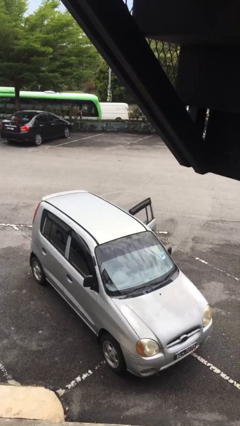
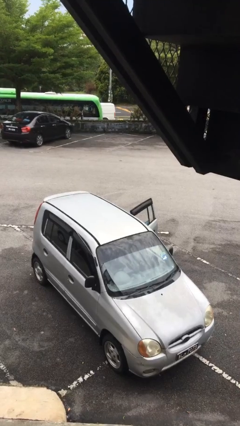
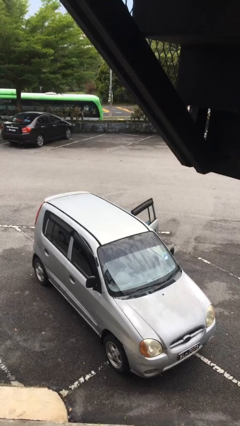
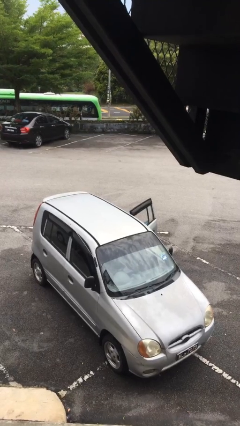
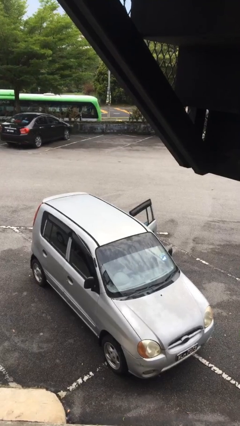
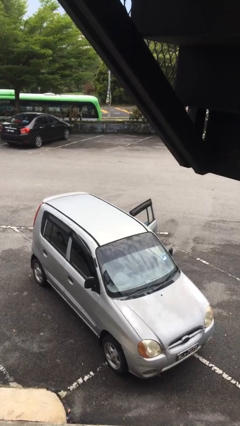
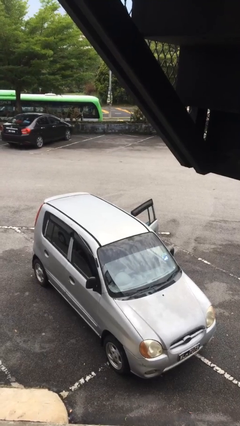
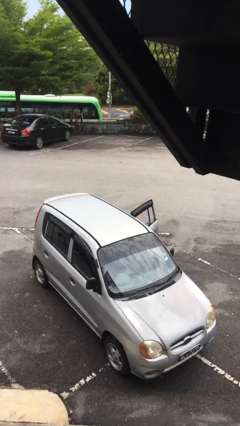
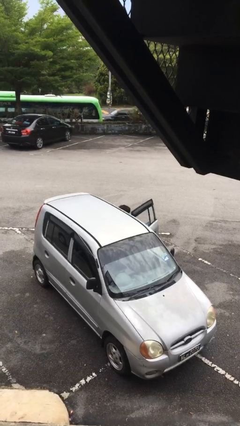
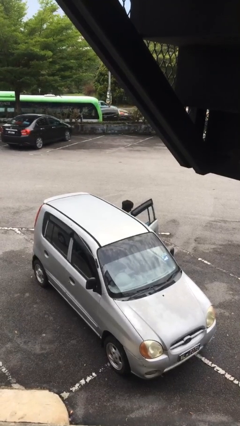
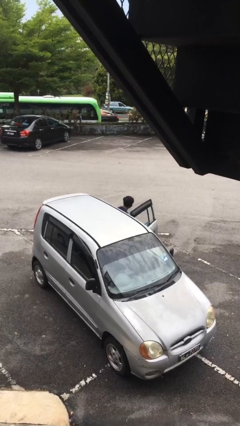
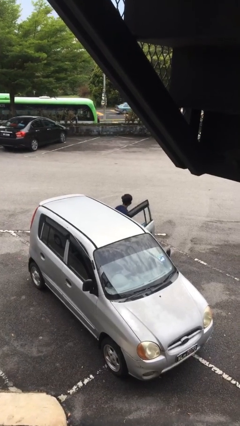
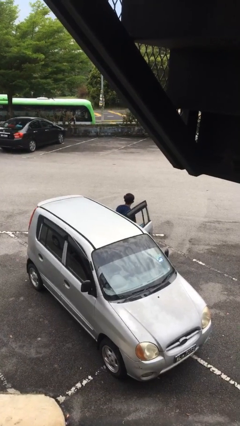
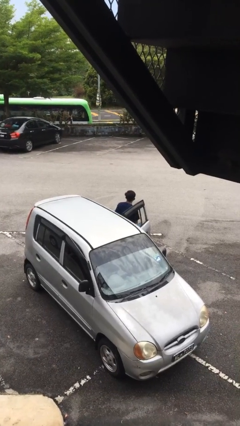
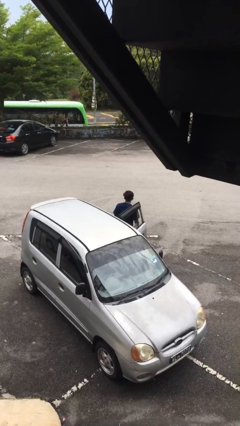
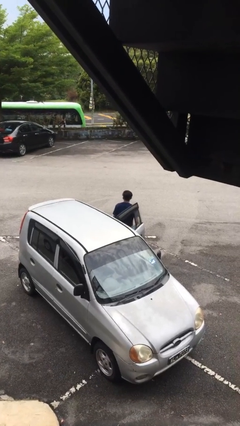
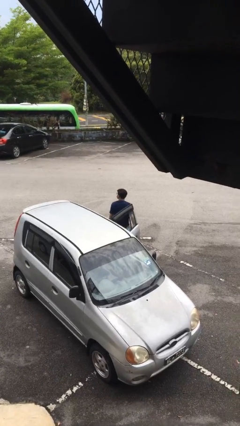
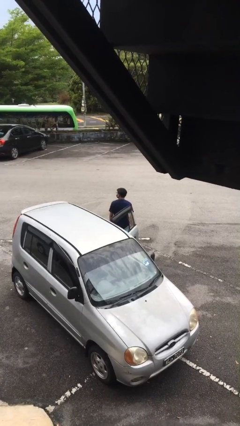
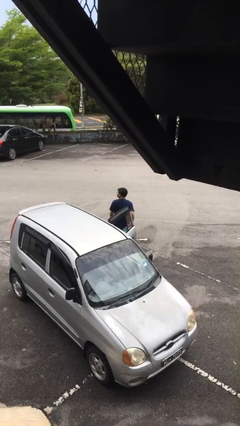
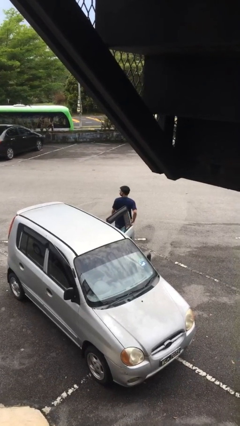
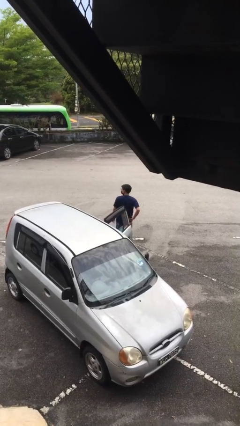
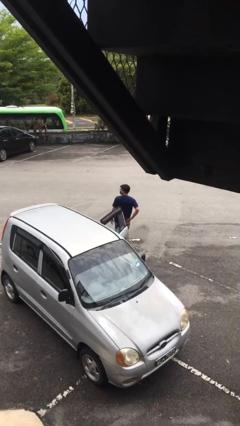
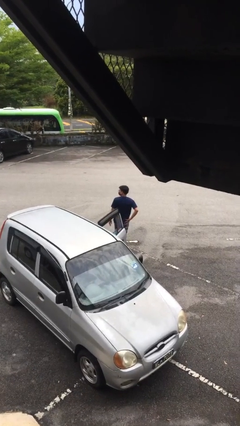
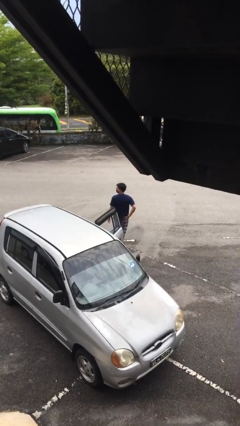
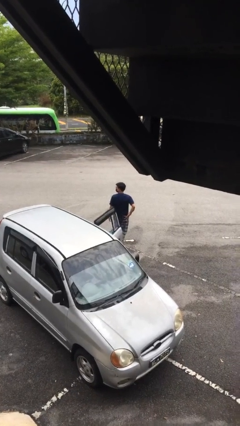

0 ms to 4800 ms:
person exits car

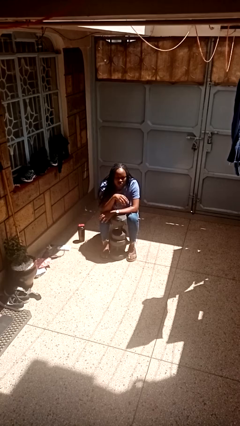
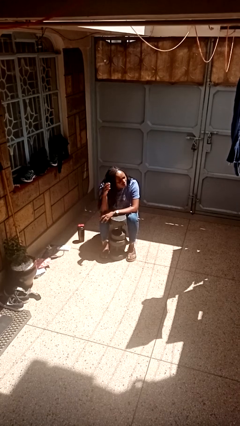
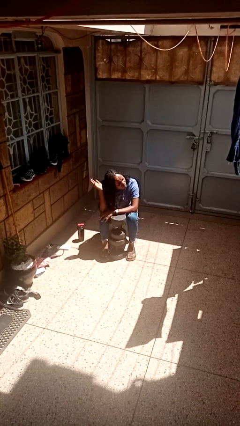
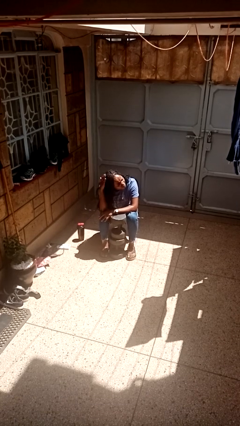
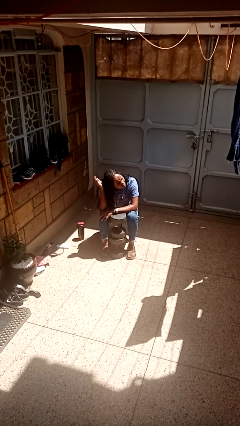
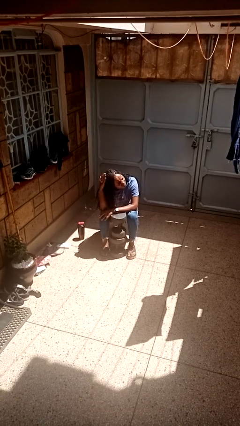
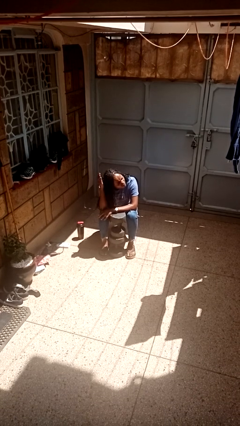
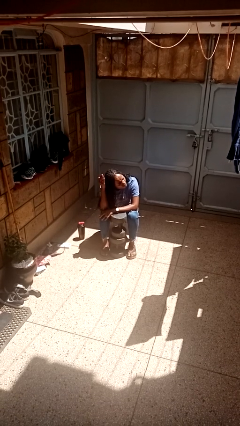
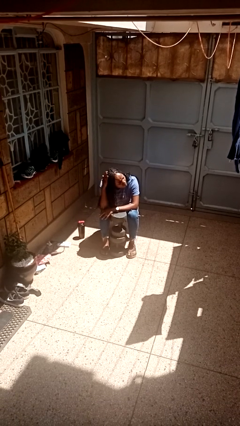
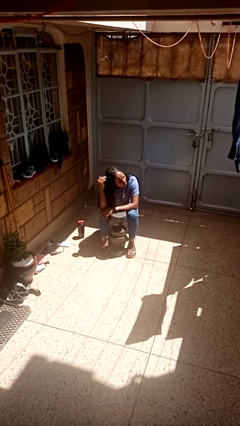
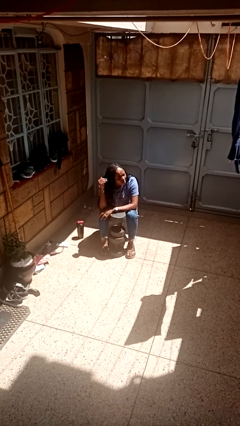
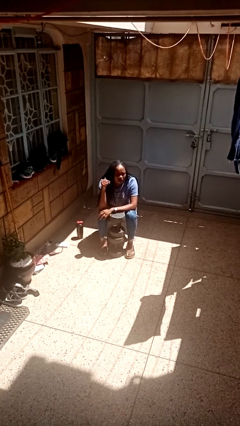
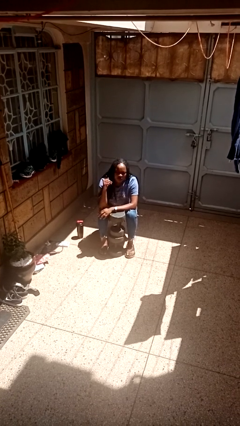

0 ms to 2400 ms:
person pats head

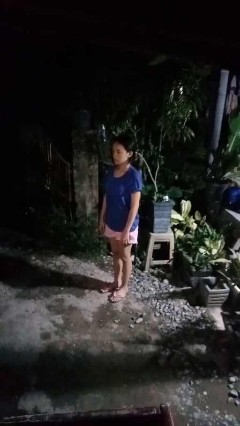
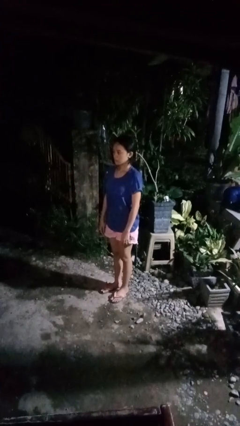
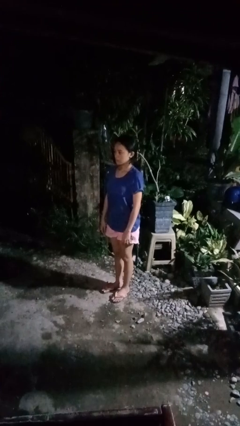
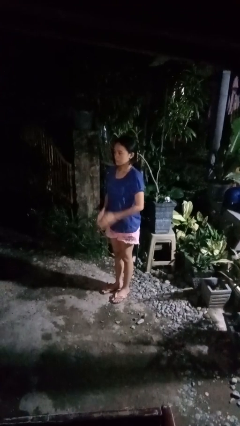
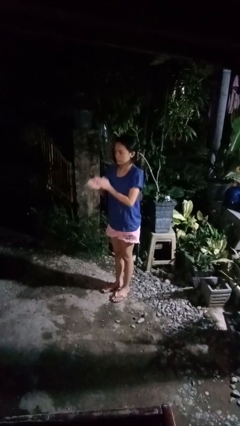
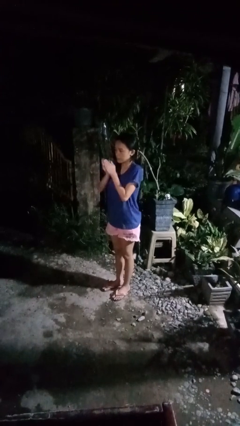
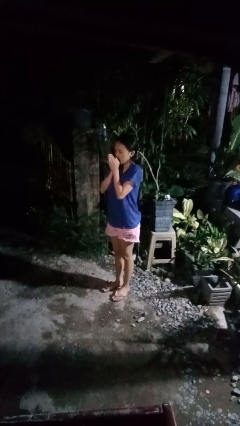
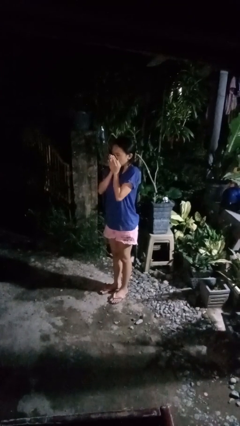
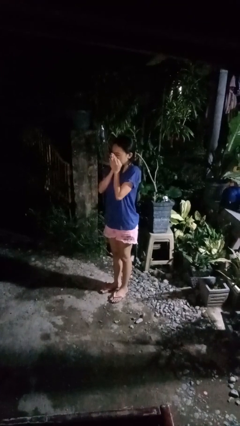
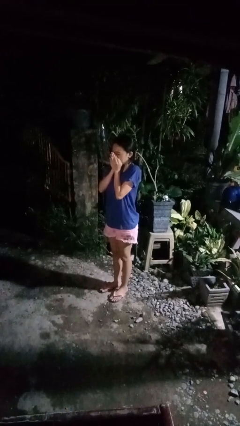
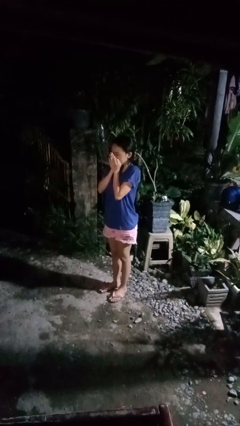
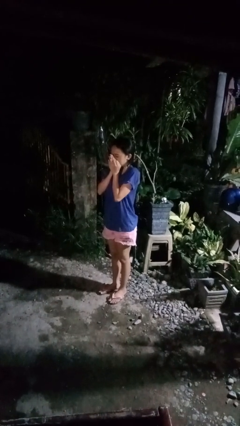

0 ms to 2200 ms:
person blows into hands

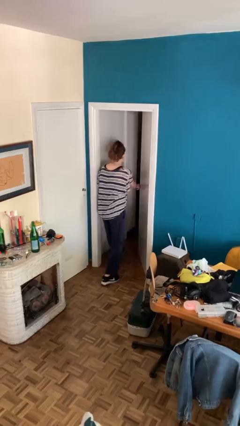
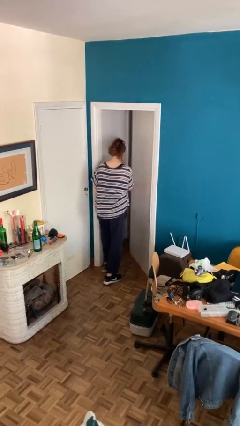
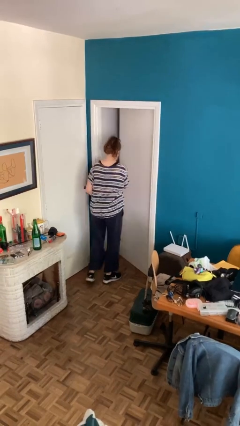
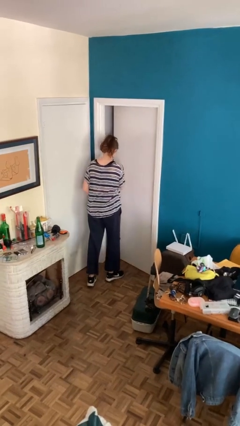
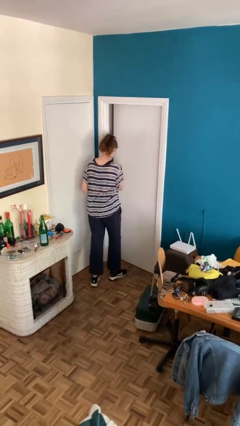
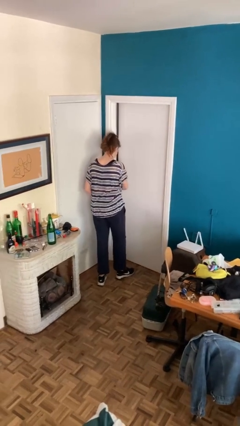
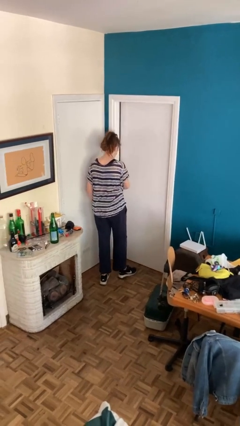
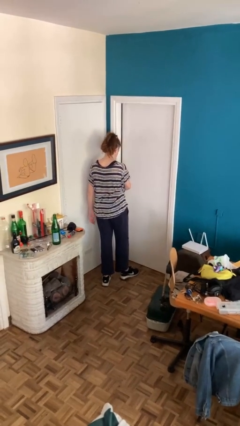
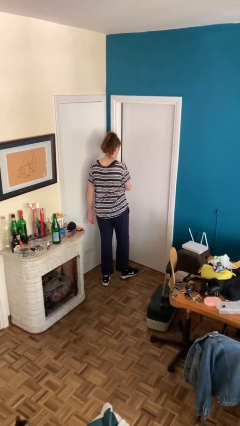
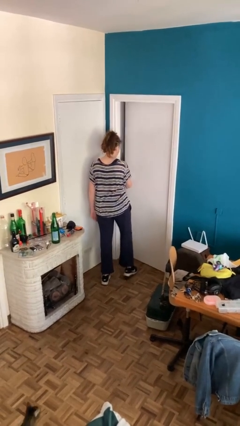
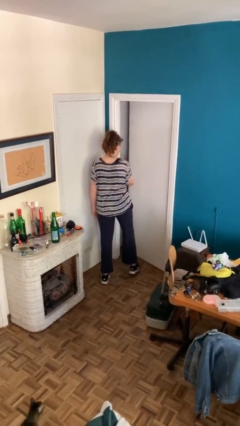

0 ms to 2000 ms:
person closes facility door

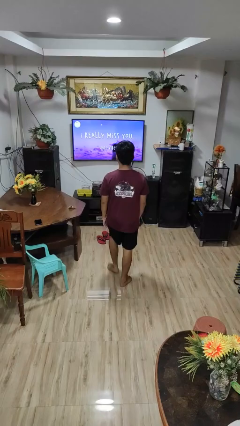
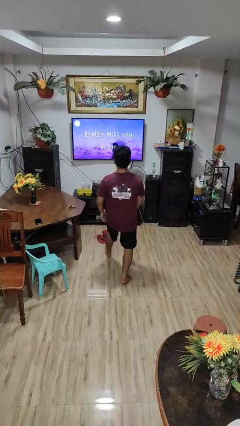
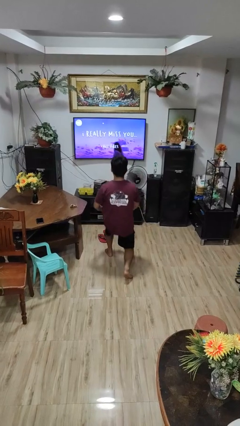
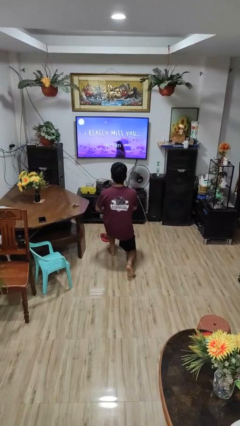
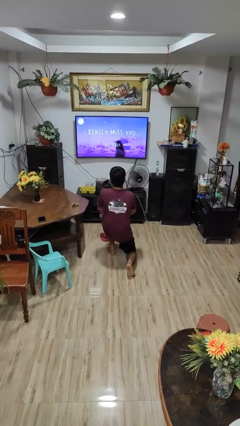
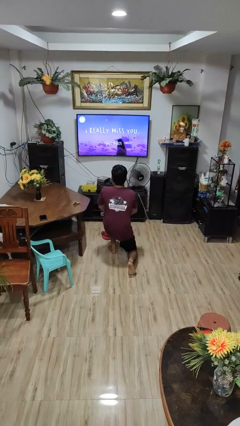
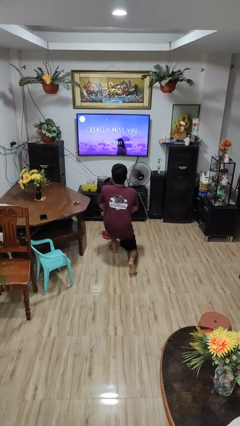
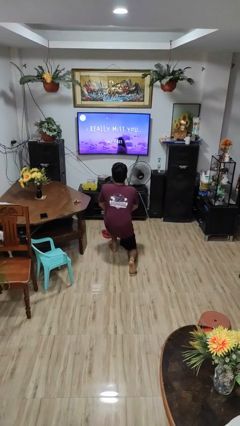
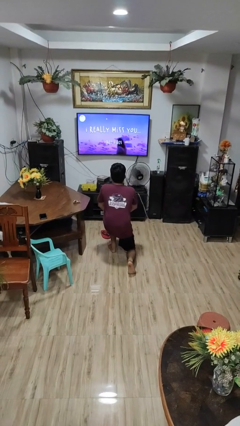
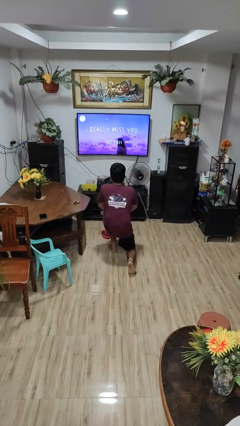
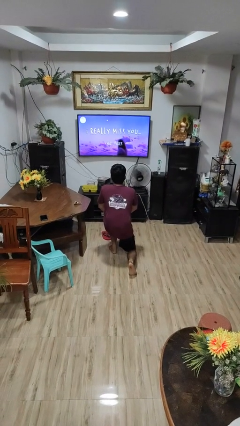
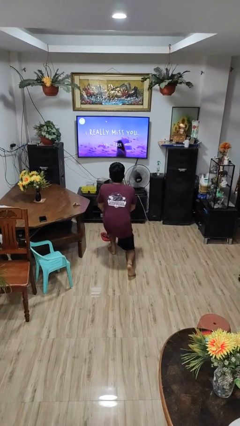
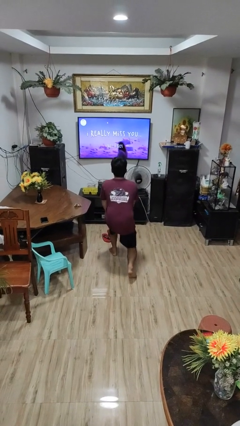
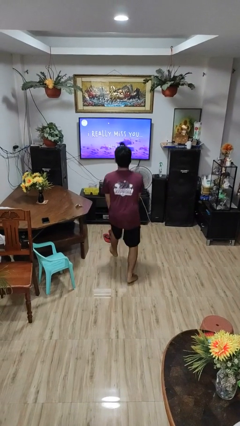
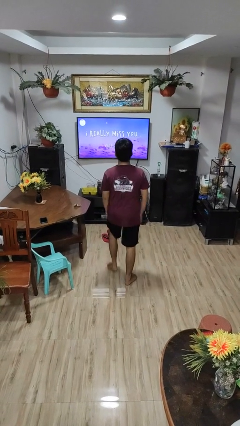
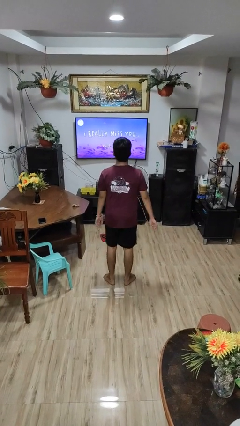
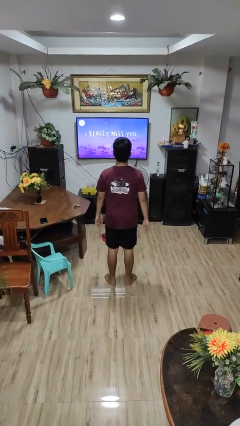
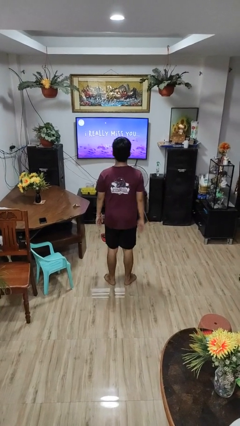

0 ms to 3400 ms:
person exercises with lunges

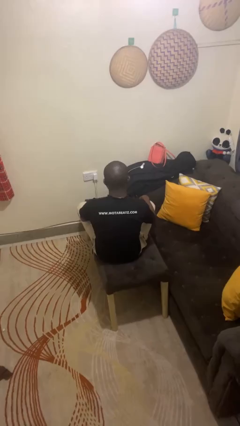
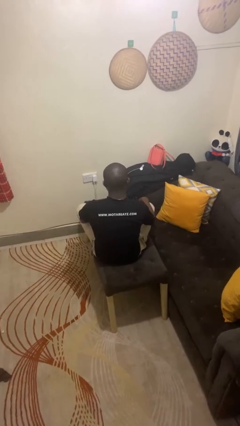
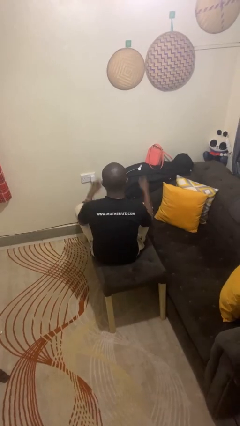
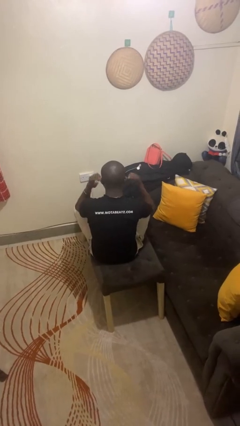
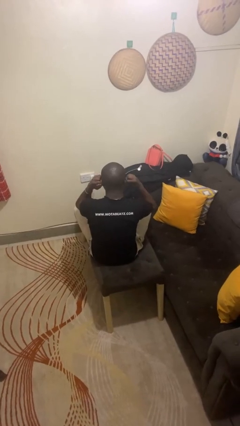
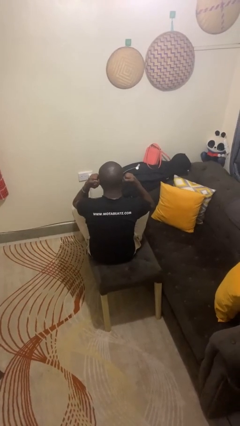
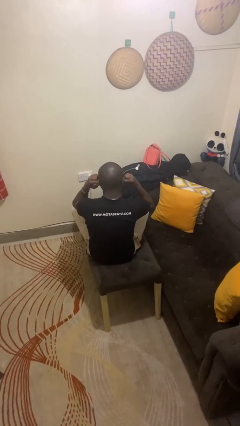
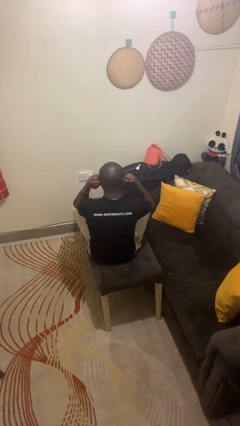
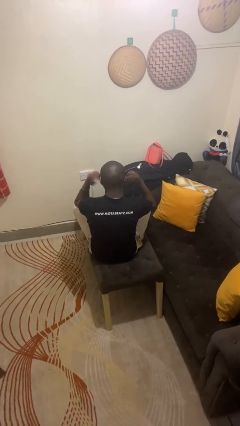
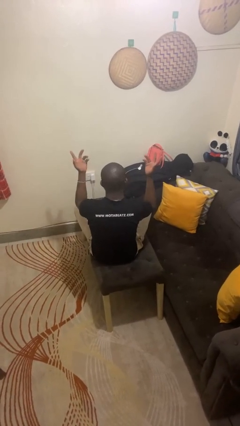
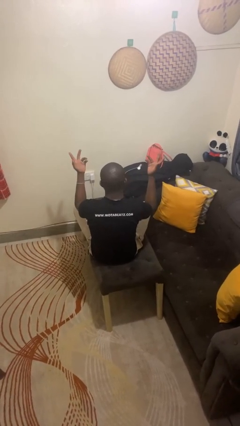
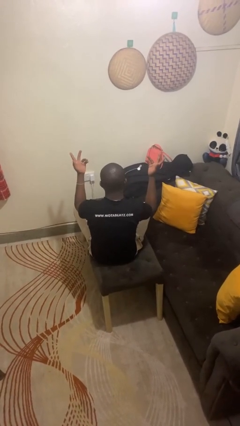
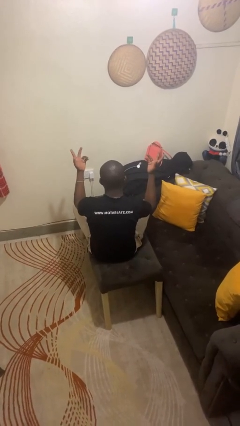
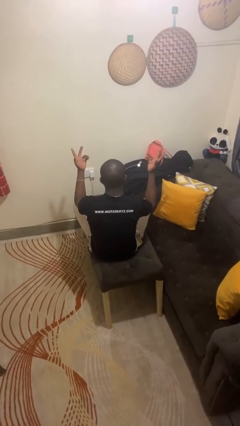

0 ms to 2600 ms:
person puts fingers in ear

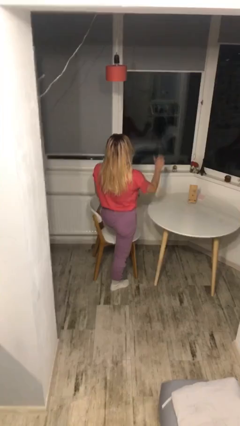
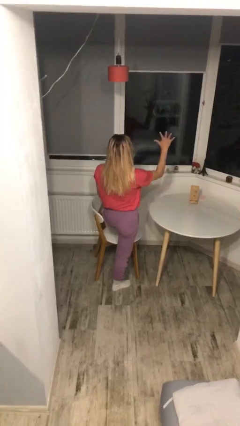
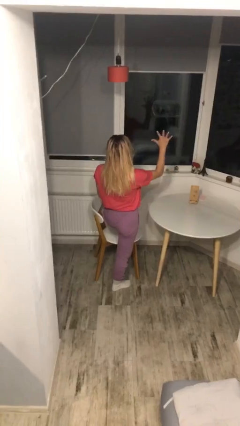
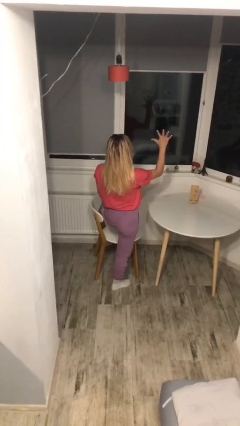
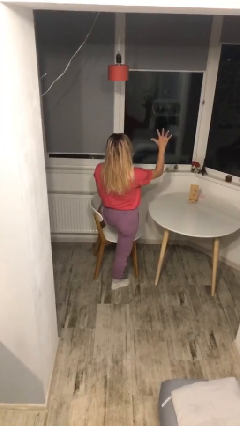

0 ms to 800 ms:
person gestures number five
